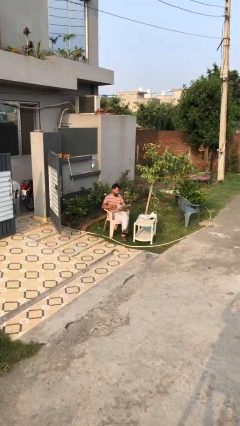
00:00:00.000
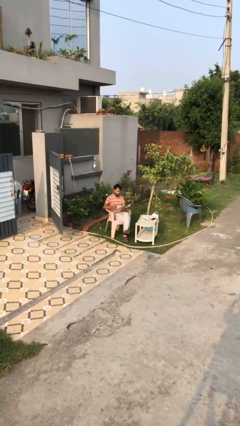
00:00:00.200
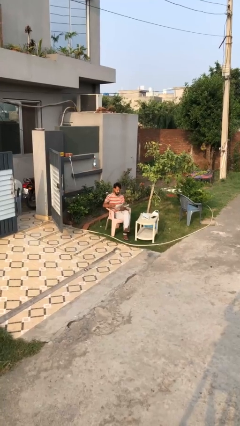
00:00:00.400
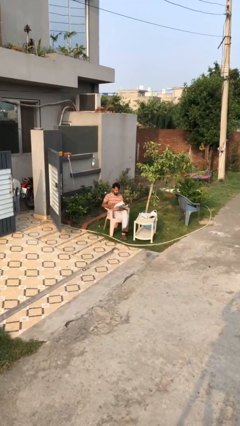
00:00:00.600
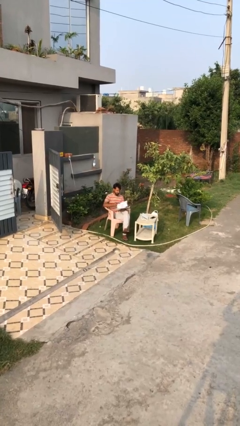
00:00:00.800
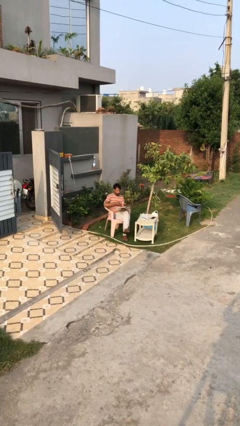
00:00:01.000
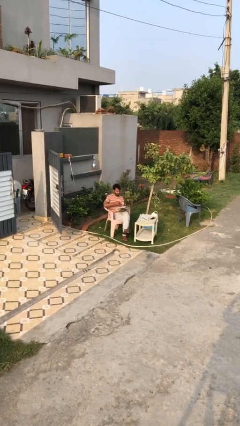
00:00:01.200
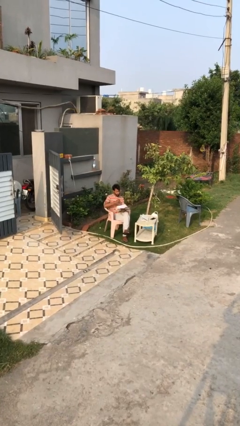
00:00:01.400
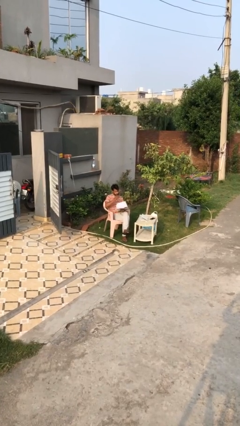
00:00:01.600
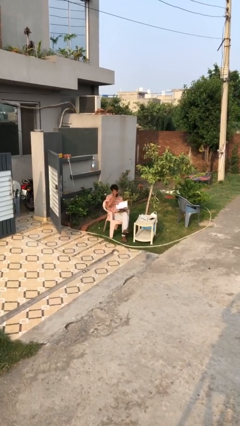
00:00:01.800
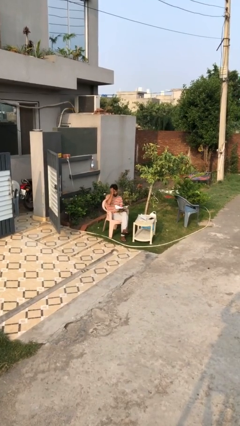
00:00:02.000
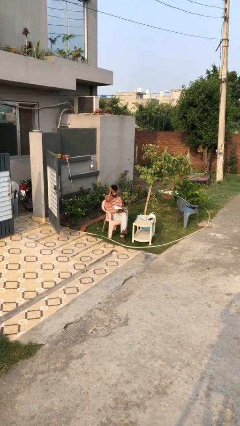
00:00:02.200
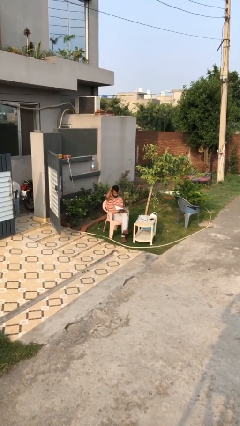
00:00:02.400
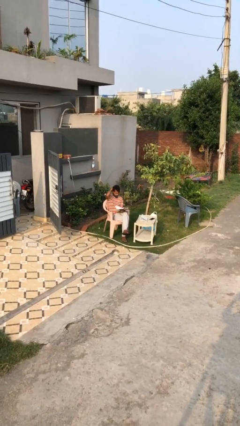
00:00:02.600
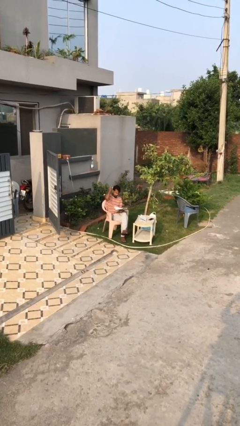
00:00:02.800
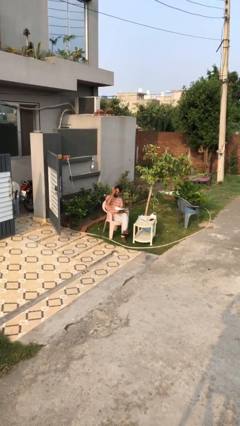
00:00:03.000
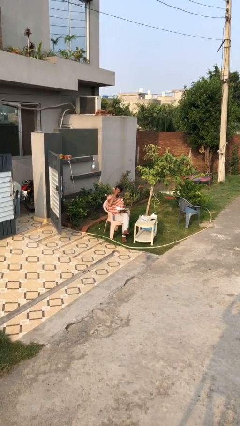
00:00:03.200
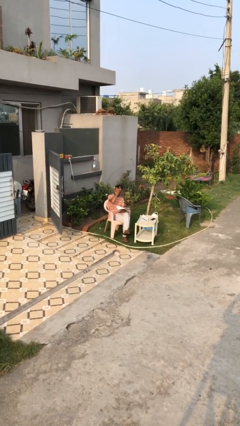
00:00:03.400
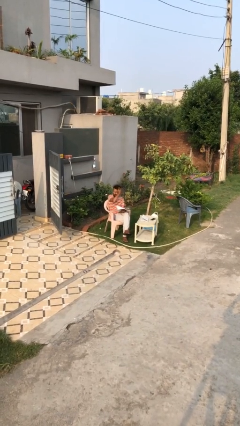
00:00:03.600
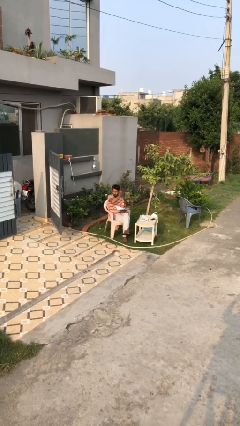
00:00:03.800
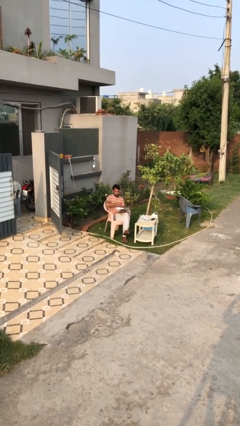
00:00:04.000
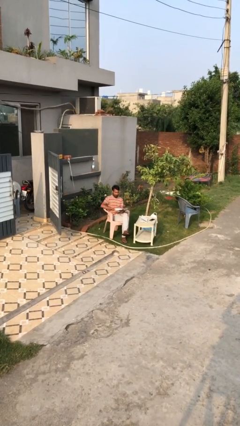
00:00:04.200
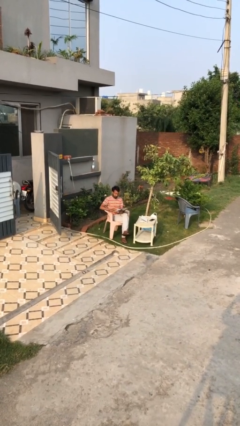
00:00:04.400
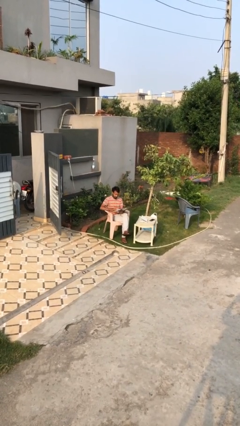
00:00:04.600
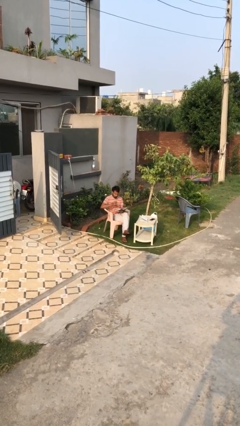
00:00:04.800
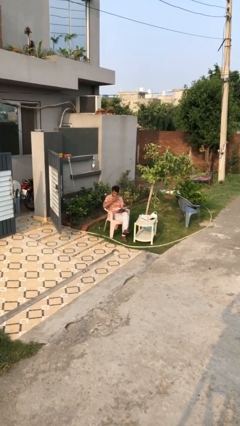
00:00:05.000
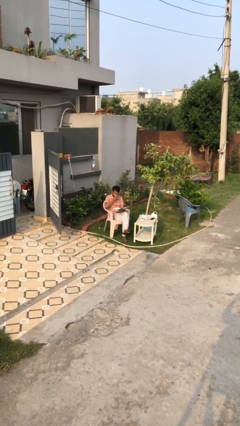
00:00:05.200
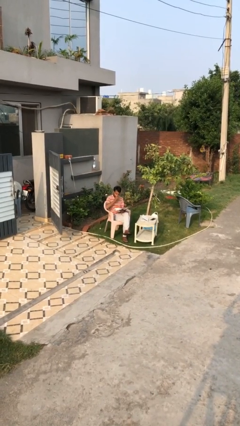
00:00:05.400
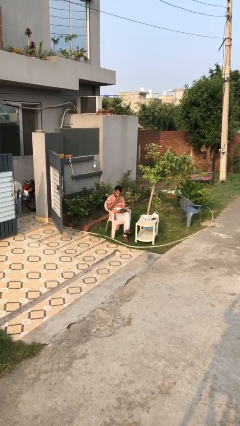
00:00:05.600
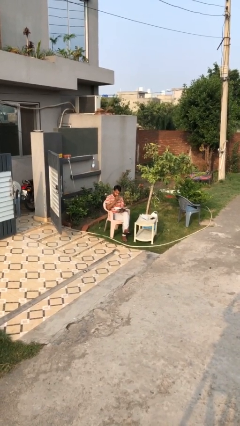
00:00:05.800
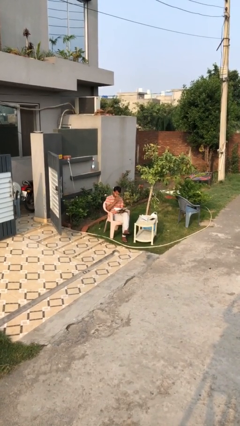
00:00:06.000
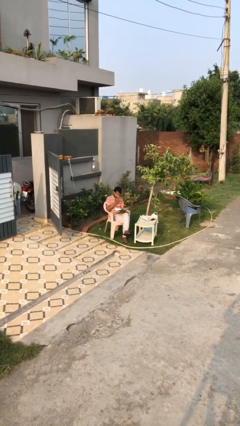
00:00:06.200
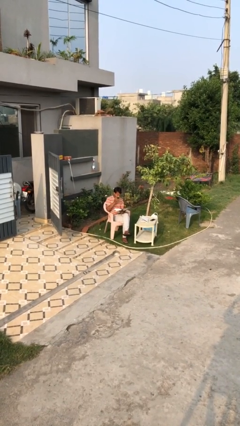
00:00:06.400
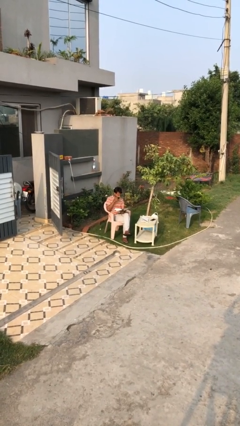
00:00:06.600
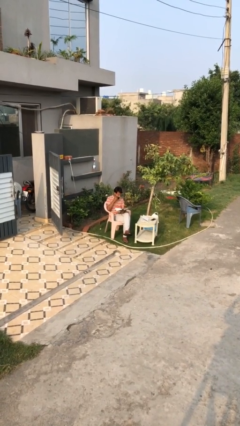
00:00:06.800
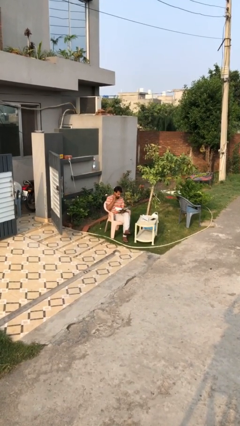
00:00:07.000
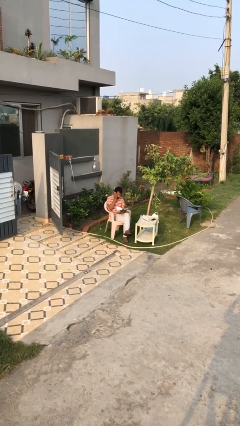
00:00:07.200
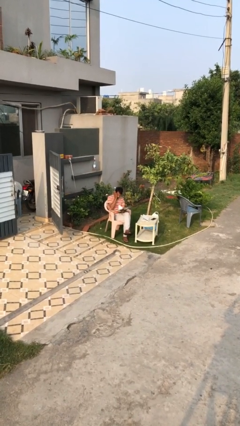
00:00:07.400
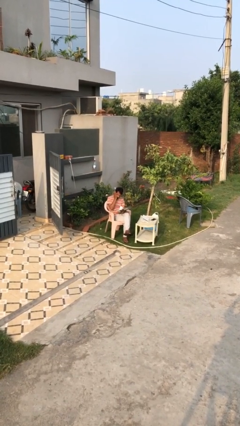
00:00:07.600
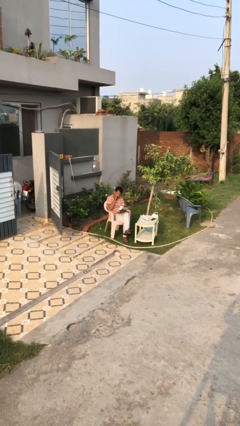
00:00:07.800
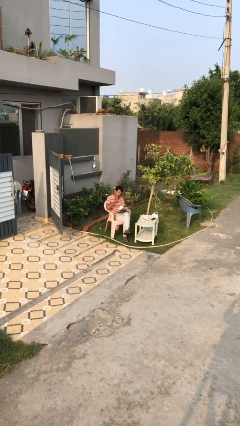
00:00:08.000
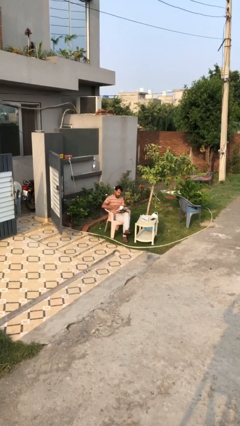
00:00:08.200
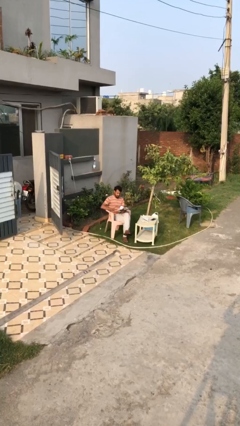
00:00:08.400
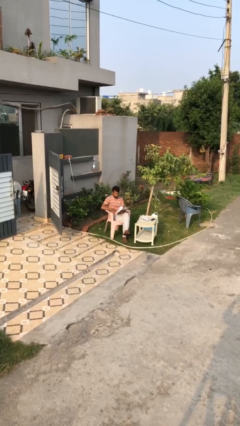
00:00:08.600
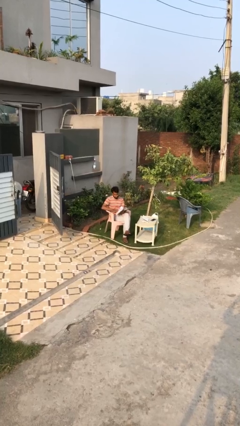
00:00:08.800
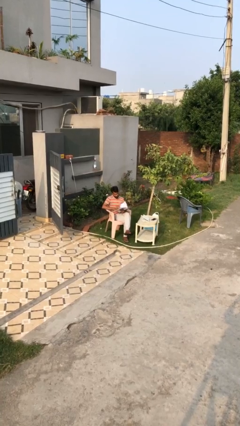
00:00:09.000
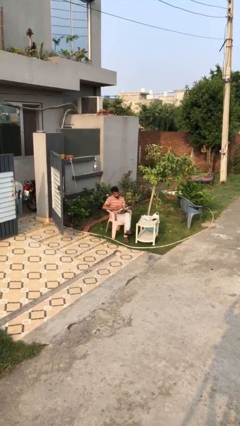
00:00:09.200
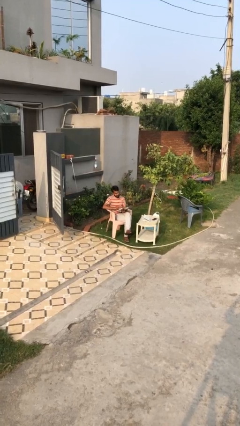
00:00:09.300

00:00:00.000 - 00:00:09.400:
person reads document

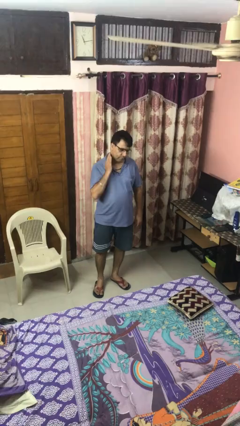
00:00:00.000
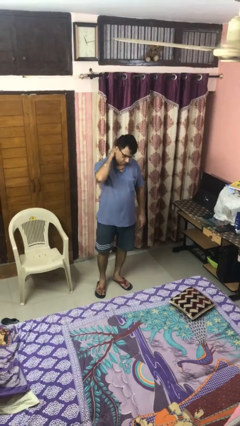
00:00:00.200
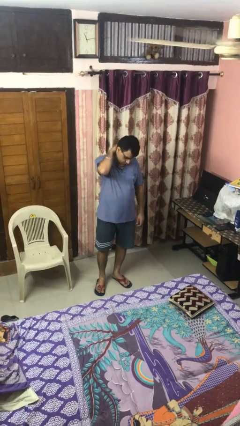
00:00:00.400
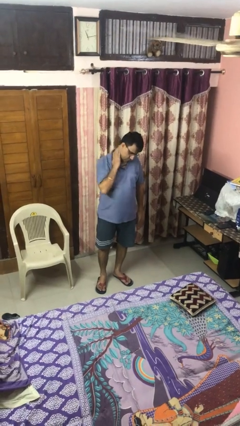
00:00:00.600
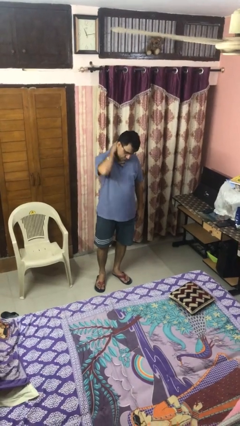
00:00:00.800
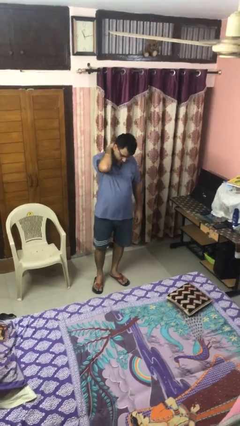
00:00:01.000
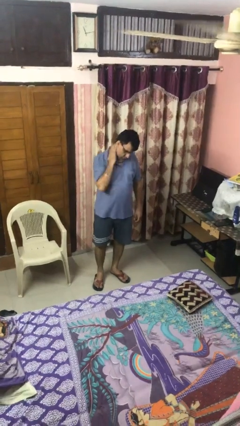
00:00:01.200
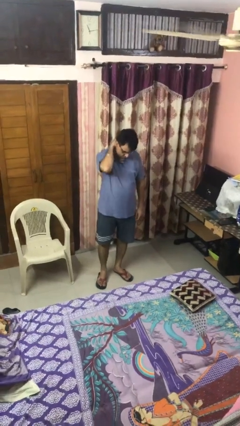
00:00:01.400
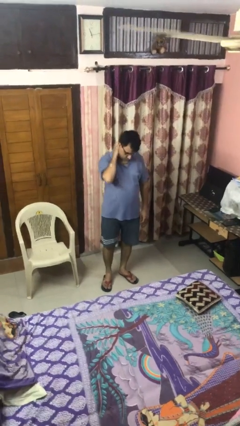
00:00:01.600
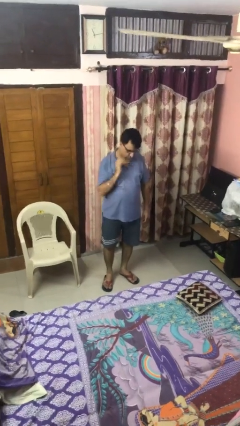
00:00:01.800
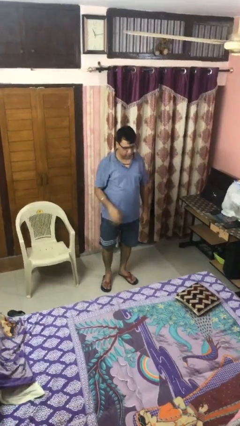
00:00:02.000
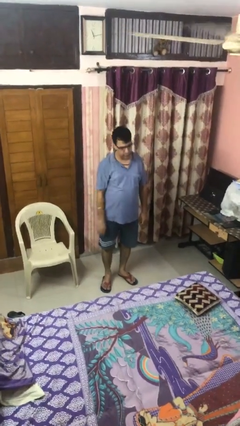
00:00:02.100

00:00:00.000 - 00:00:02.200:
person rubs neck

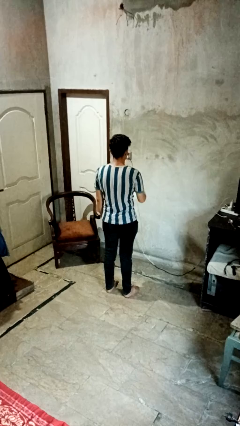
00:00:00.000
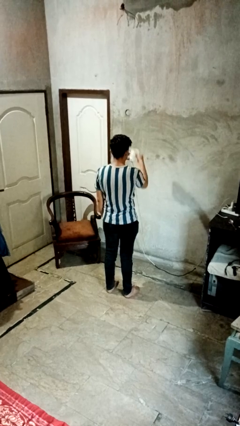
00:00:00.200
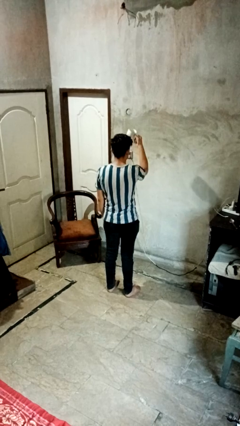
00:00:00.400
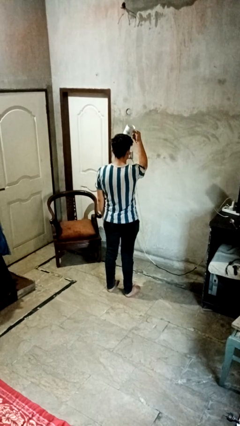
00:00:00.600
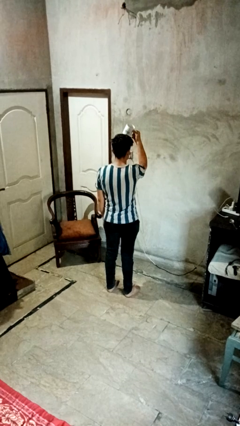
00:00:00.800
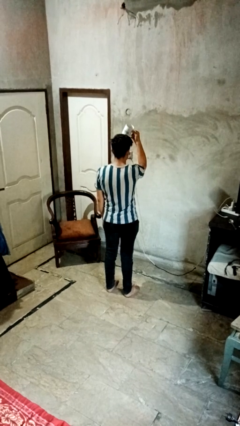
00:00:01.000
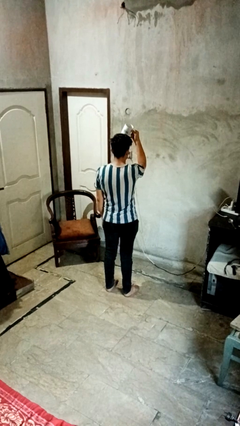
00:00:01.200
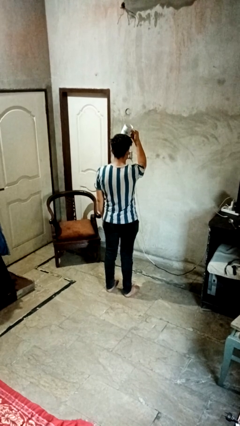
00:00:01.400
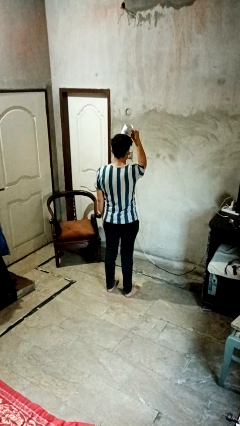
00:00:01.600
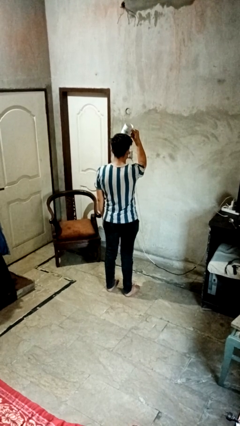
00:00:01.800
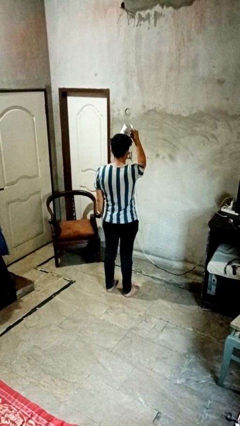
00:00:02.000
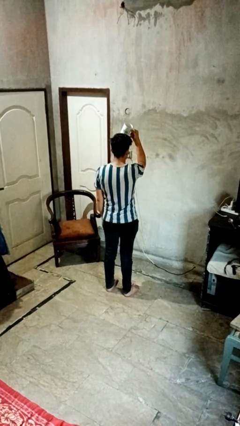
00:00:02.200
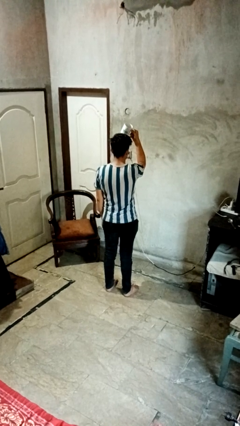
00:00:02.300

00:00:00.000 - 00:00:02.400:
person holds object above head

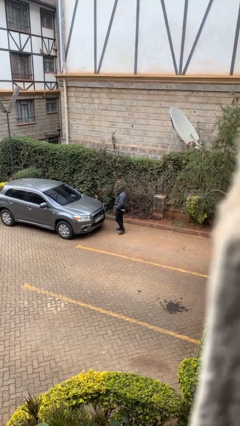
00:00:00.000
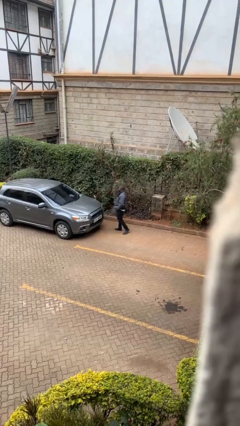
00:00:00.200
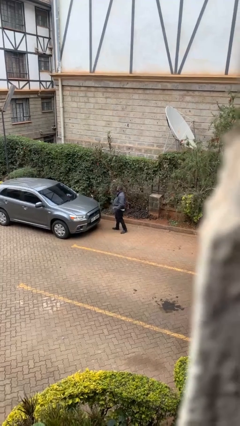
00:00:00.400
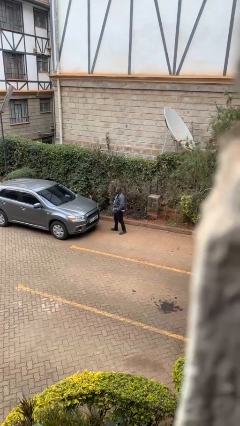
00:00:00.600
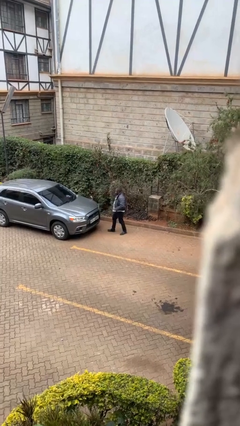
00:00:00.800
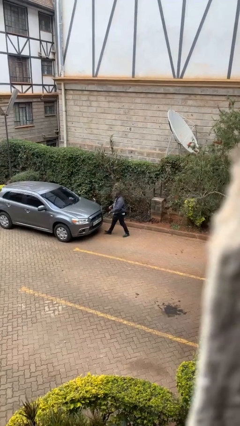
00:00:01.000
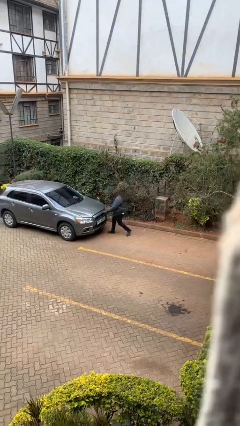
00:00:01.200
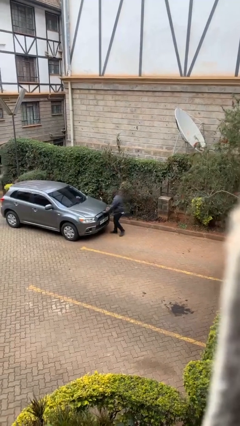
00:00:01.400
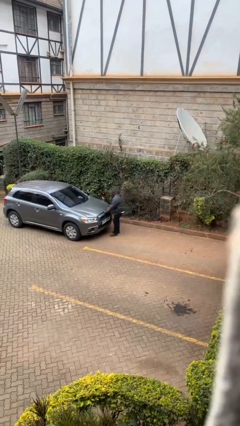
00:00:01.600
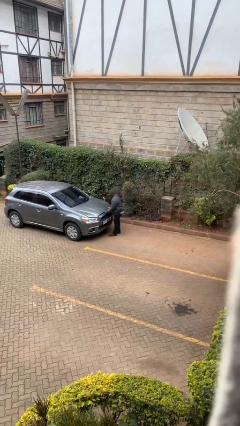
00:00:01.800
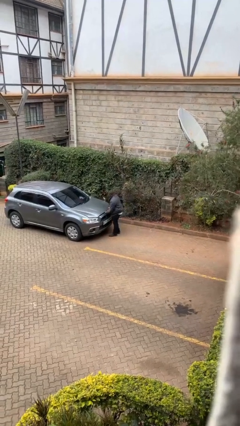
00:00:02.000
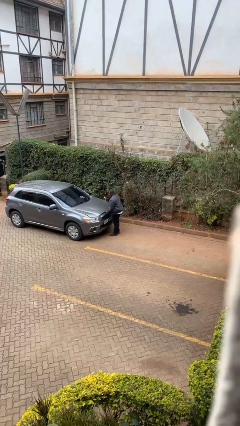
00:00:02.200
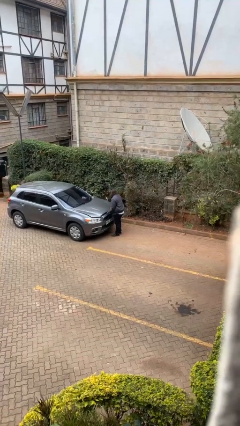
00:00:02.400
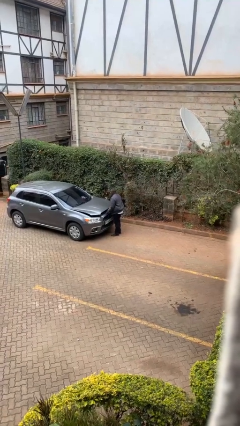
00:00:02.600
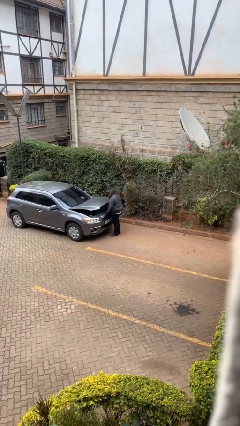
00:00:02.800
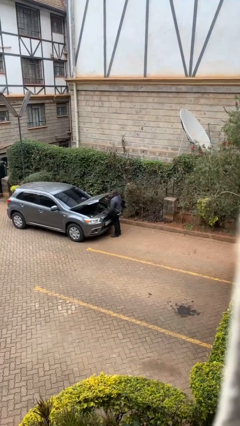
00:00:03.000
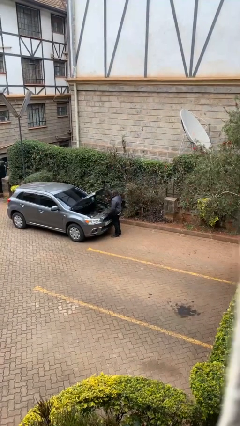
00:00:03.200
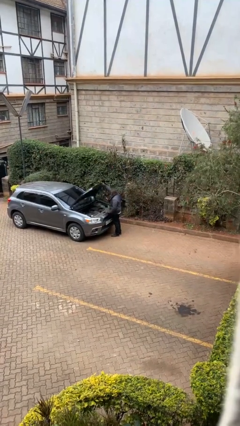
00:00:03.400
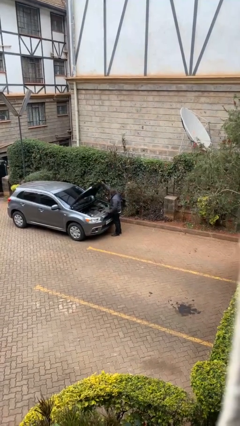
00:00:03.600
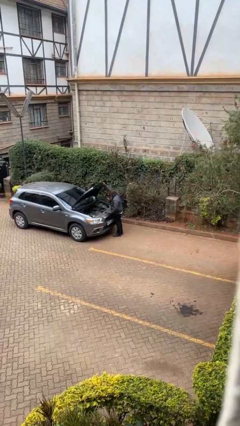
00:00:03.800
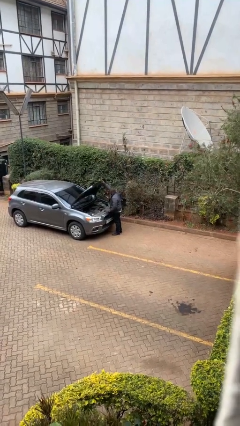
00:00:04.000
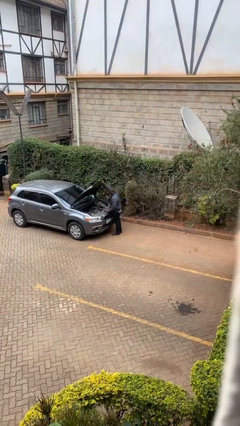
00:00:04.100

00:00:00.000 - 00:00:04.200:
person opens car hood
